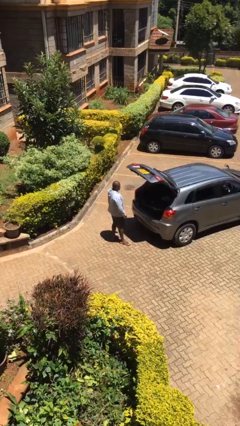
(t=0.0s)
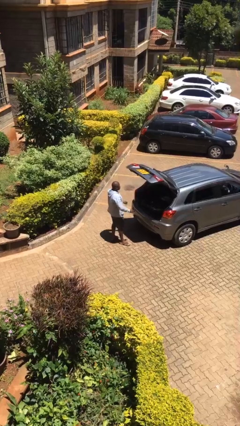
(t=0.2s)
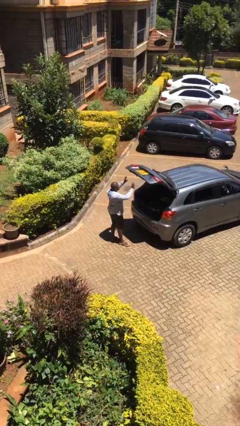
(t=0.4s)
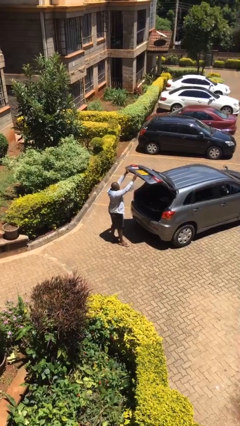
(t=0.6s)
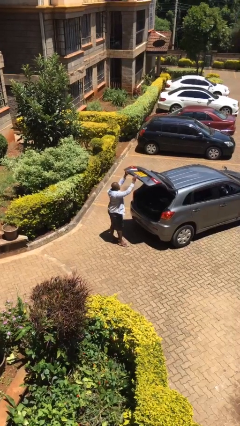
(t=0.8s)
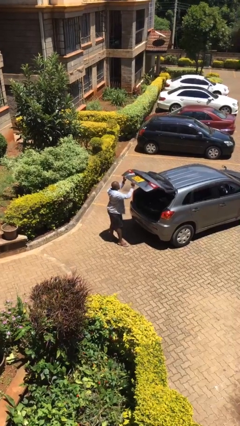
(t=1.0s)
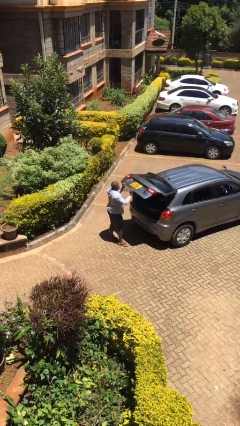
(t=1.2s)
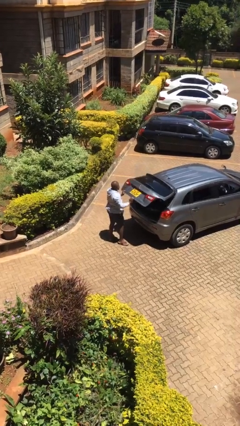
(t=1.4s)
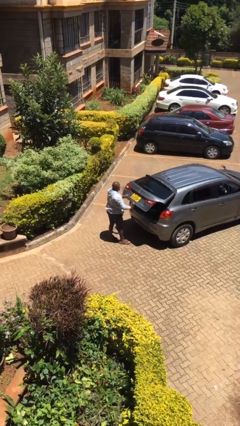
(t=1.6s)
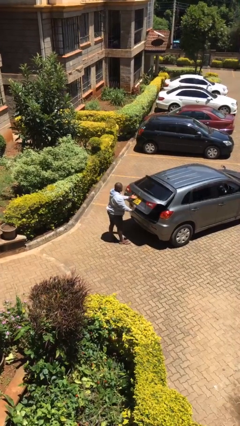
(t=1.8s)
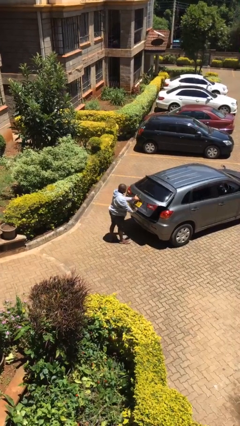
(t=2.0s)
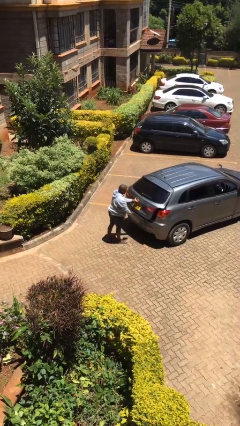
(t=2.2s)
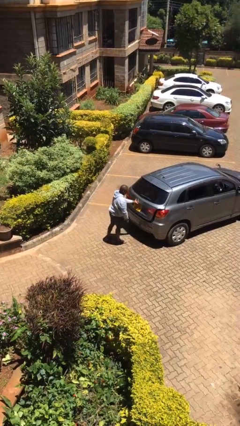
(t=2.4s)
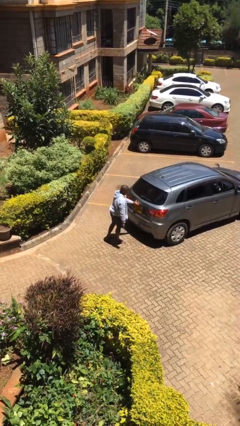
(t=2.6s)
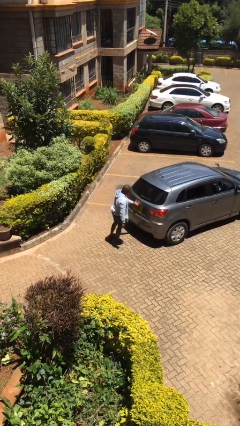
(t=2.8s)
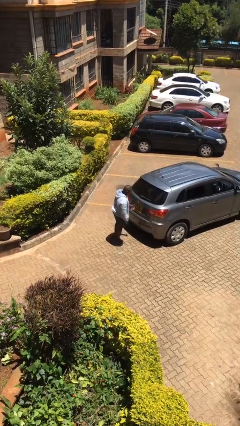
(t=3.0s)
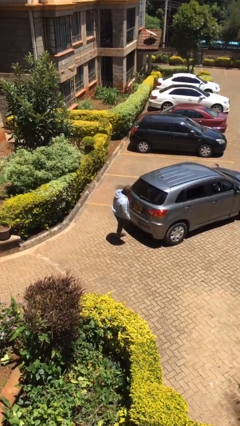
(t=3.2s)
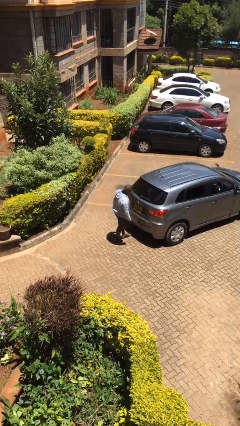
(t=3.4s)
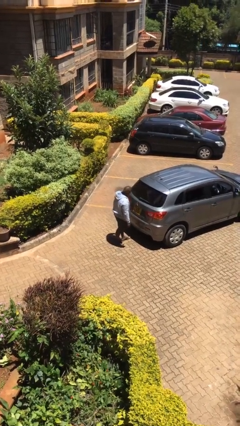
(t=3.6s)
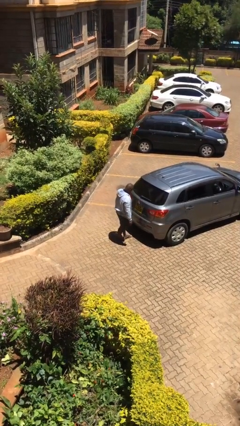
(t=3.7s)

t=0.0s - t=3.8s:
person closes car trunk

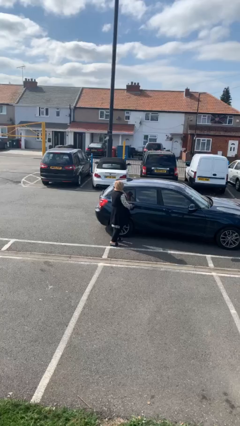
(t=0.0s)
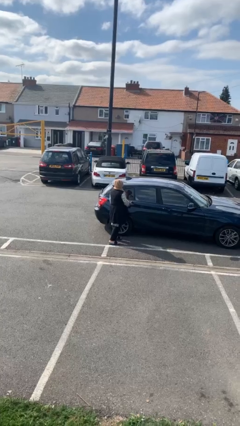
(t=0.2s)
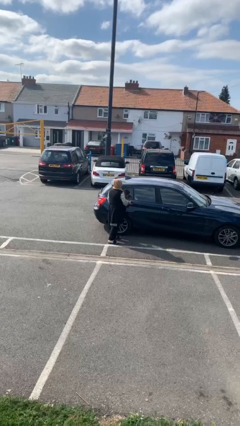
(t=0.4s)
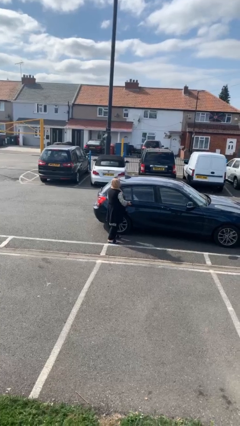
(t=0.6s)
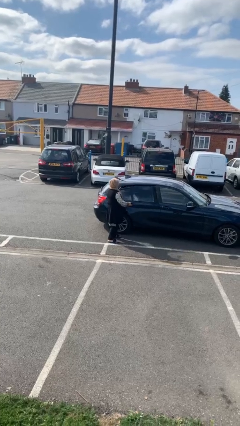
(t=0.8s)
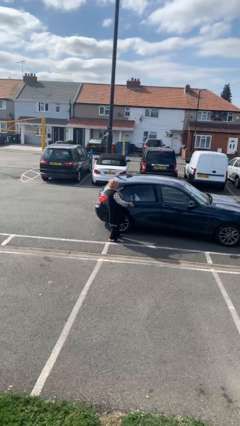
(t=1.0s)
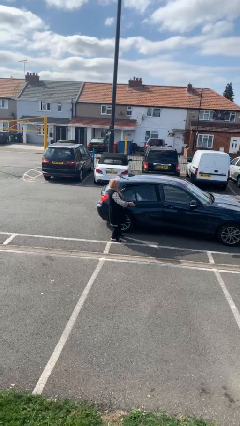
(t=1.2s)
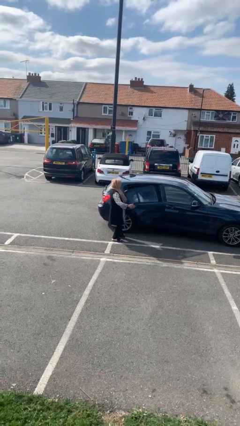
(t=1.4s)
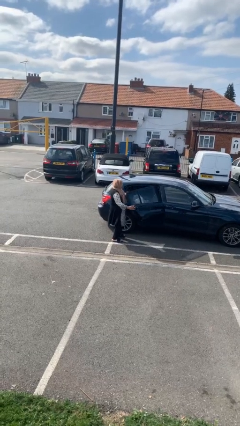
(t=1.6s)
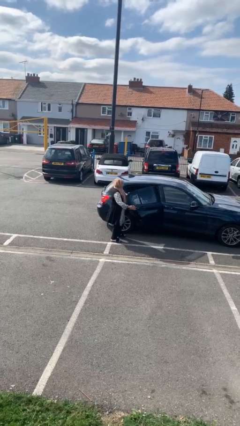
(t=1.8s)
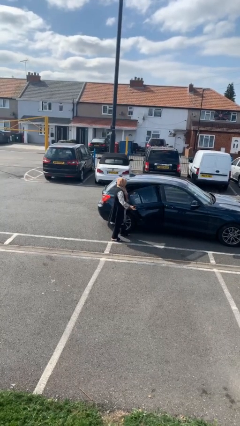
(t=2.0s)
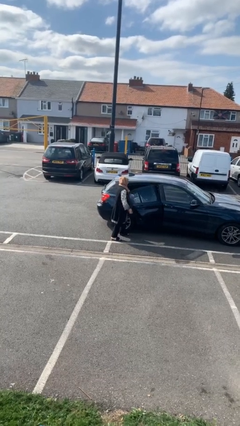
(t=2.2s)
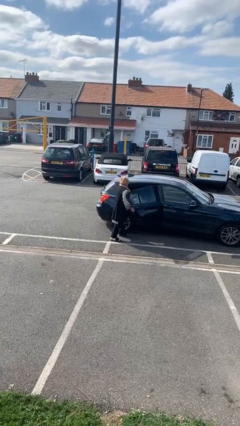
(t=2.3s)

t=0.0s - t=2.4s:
person opens car door

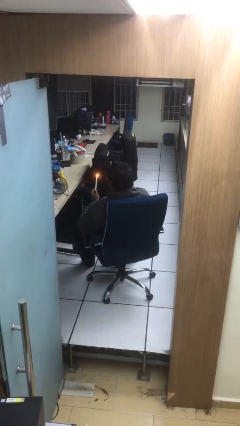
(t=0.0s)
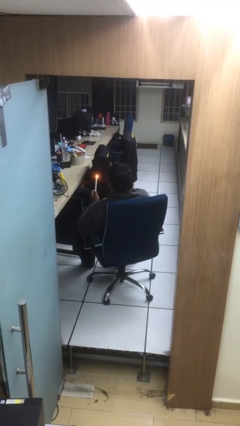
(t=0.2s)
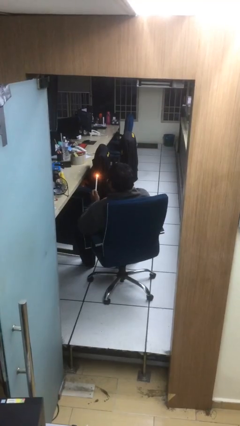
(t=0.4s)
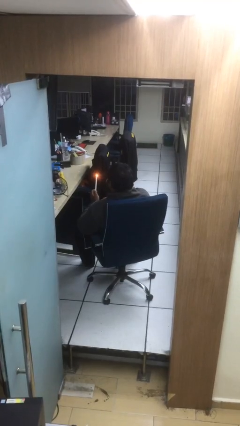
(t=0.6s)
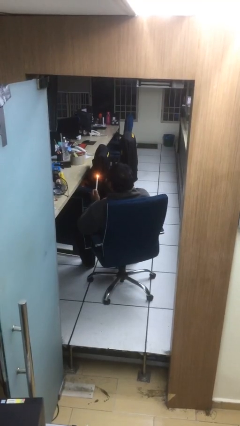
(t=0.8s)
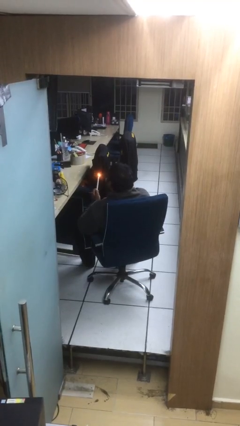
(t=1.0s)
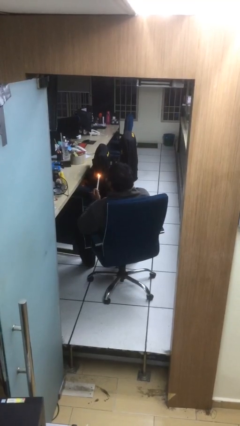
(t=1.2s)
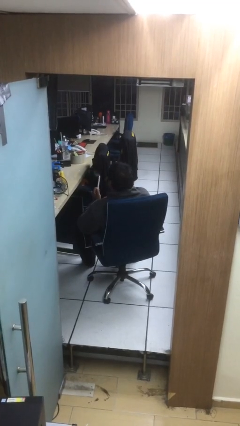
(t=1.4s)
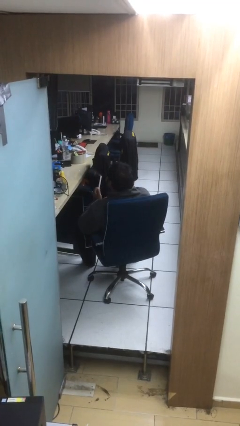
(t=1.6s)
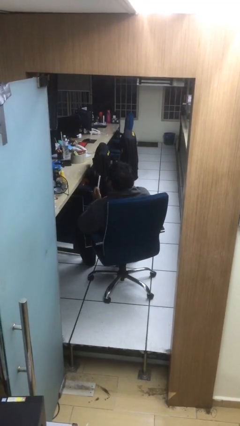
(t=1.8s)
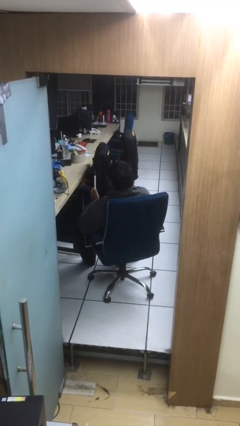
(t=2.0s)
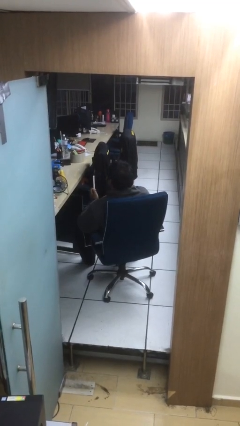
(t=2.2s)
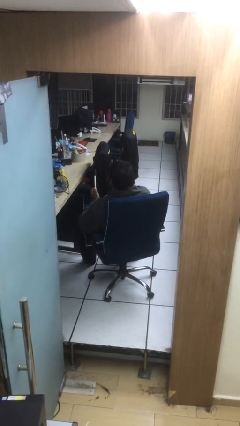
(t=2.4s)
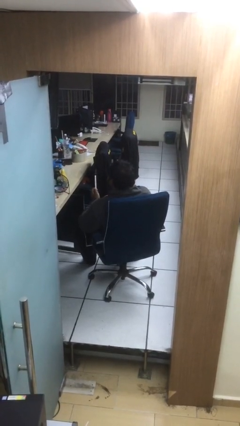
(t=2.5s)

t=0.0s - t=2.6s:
person extinguishes candle

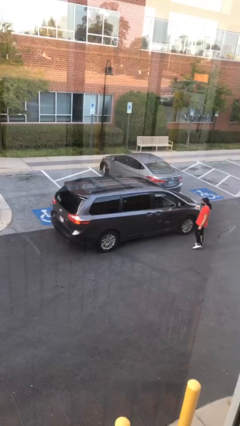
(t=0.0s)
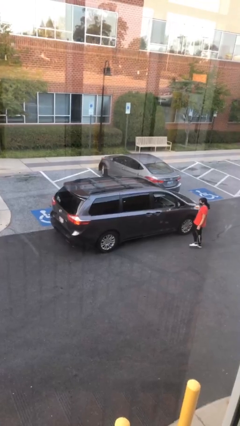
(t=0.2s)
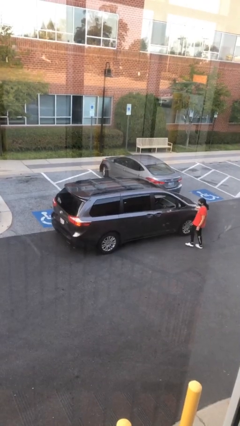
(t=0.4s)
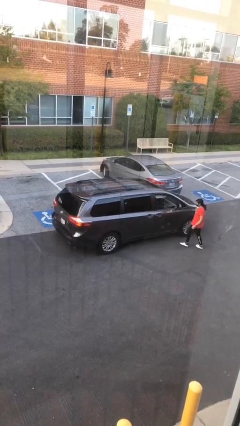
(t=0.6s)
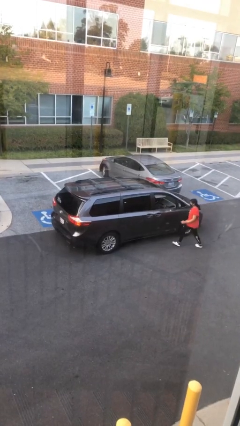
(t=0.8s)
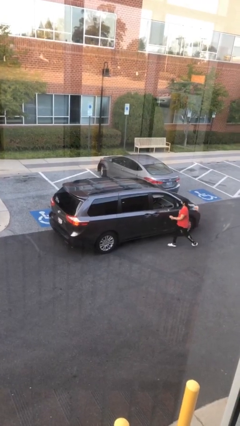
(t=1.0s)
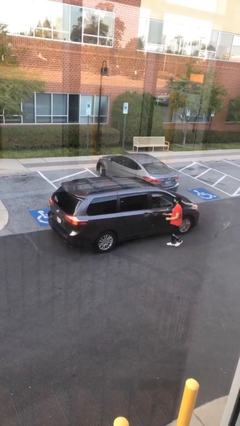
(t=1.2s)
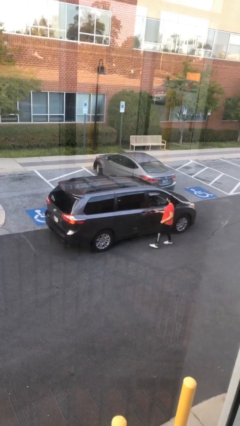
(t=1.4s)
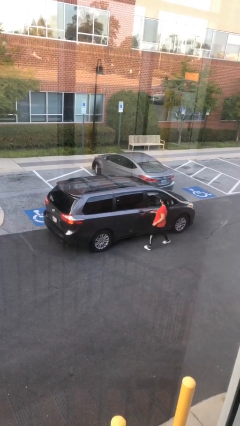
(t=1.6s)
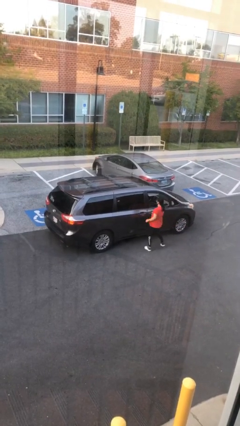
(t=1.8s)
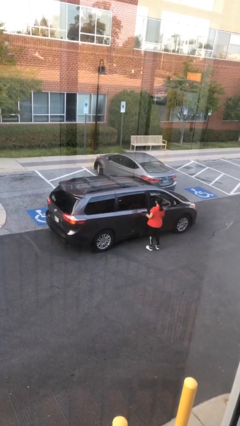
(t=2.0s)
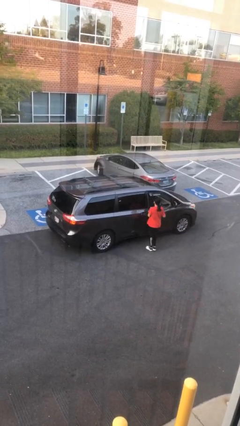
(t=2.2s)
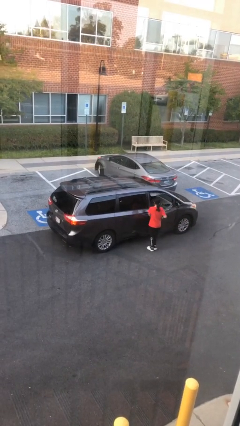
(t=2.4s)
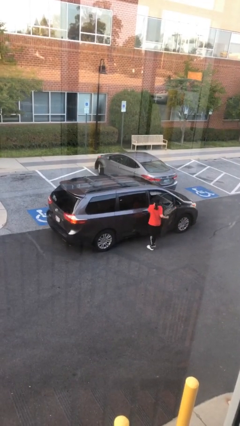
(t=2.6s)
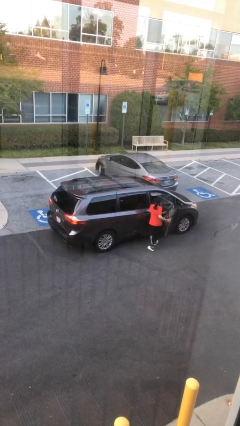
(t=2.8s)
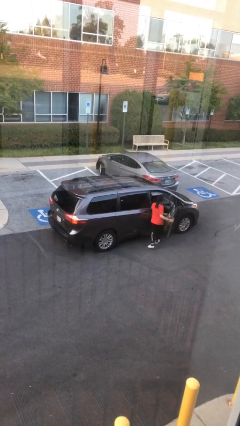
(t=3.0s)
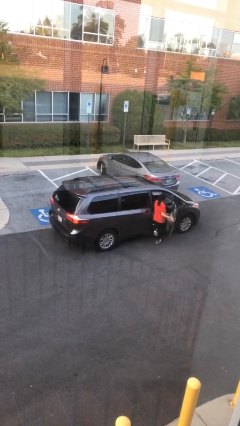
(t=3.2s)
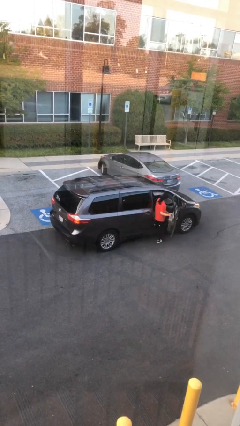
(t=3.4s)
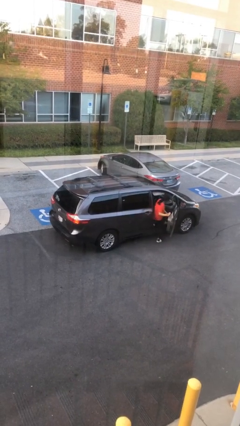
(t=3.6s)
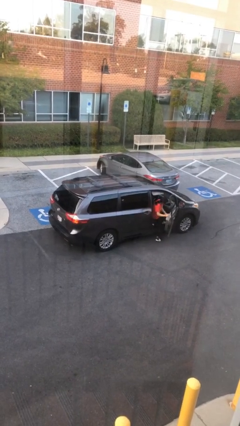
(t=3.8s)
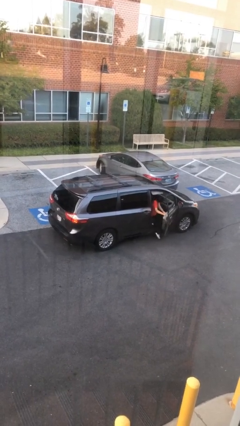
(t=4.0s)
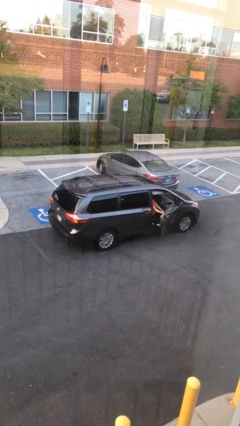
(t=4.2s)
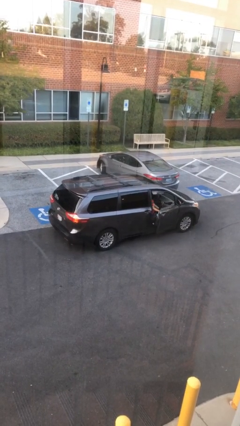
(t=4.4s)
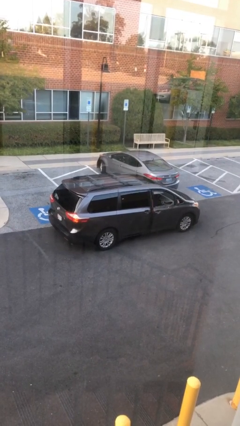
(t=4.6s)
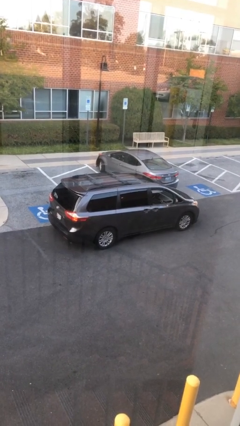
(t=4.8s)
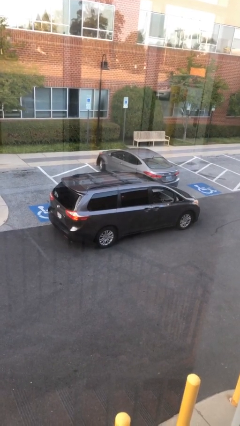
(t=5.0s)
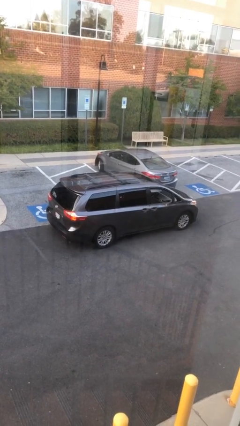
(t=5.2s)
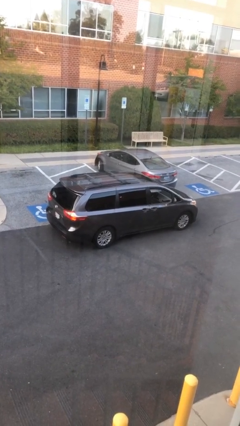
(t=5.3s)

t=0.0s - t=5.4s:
car picks up person

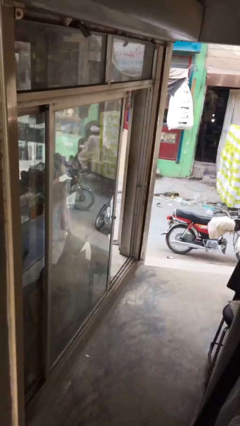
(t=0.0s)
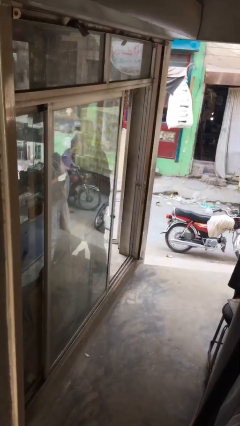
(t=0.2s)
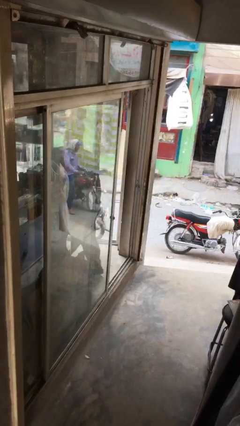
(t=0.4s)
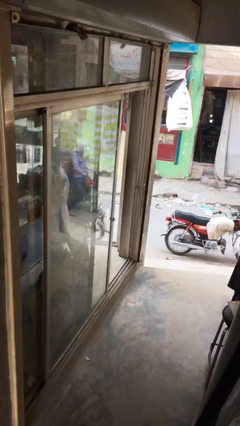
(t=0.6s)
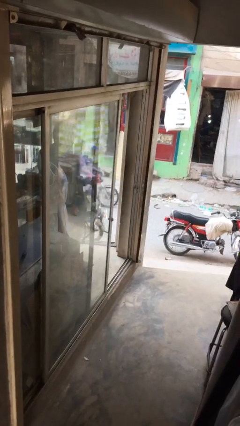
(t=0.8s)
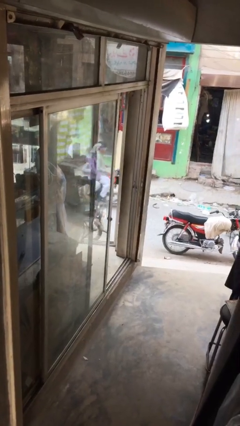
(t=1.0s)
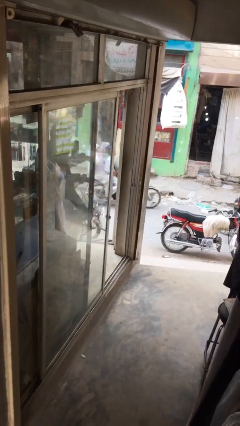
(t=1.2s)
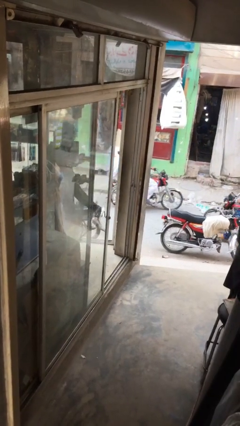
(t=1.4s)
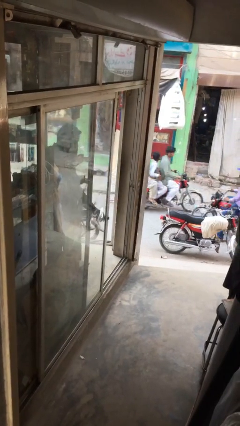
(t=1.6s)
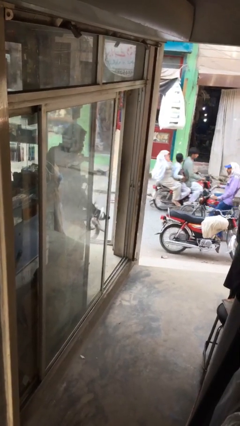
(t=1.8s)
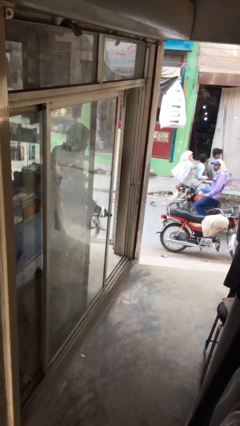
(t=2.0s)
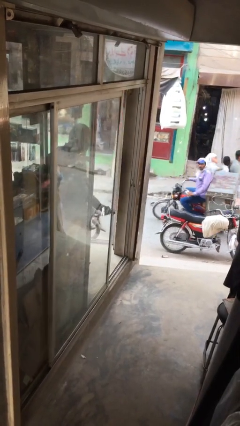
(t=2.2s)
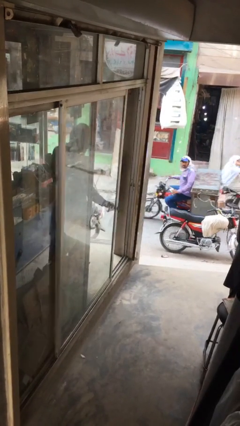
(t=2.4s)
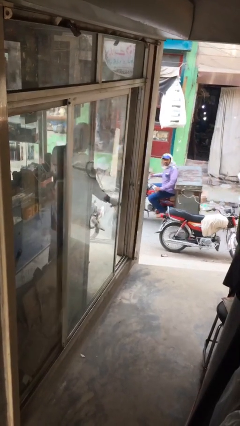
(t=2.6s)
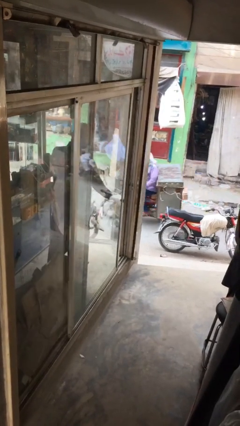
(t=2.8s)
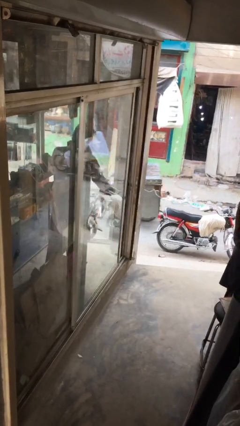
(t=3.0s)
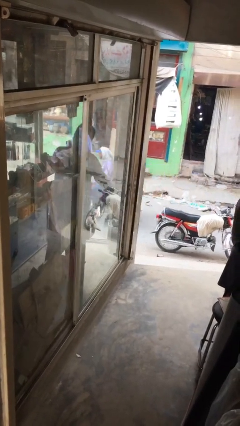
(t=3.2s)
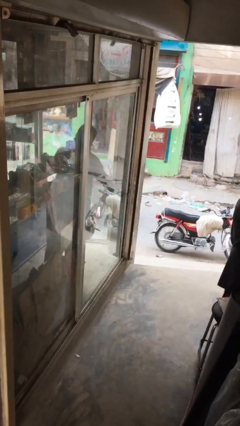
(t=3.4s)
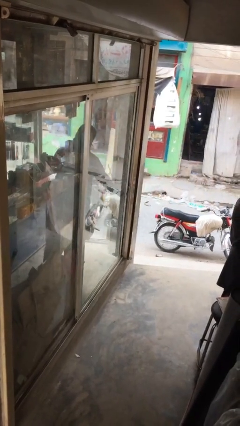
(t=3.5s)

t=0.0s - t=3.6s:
person closes facility door
